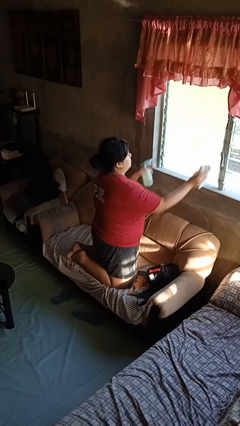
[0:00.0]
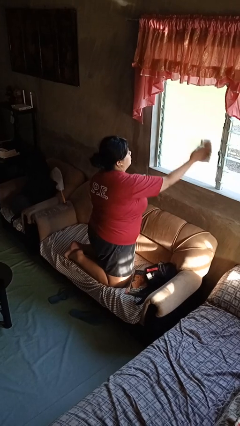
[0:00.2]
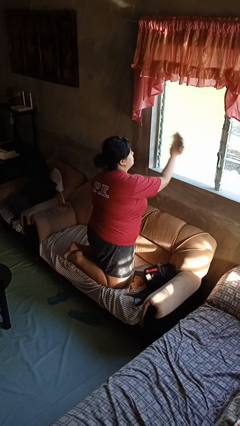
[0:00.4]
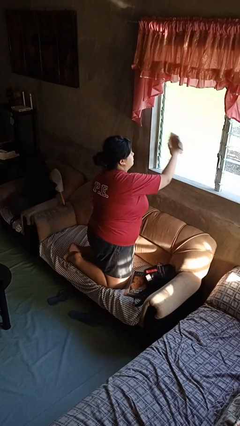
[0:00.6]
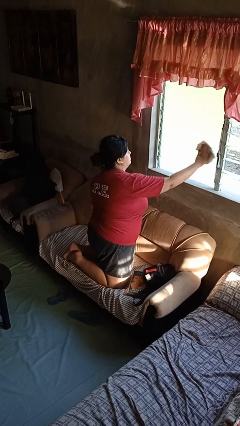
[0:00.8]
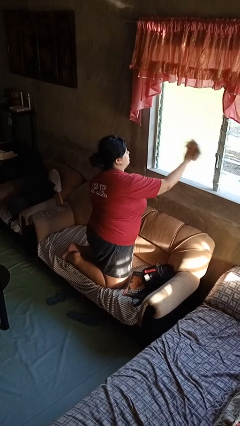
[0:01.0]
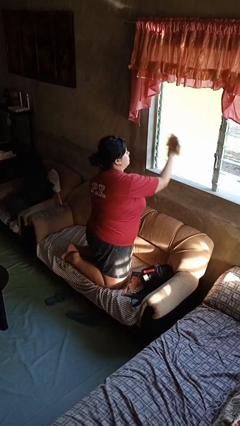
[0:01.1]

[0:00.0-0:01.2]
person washes window

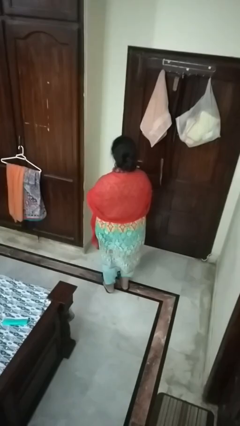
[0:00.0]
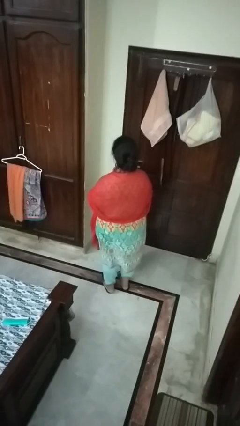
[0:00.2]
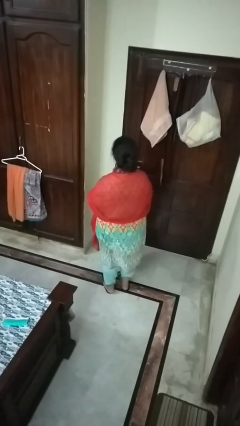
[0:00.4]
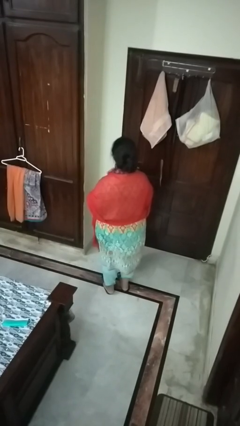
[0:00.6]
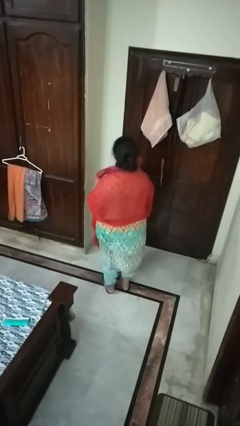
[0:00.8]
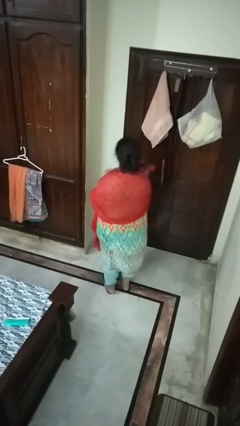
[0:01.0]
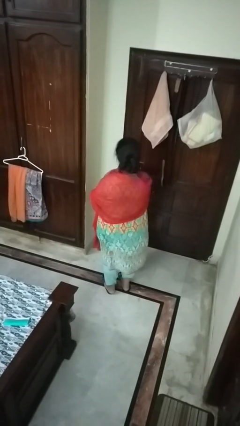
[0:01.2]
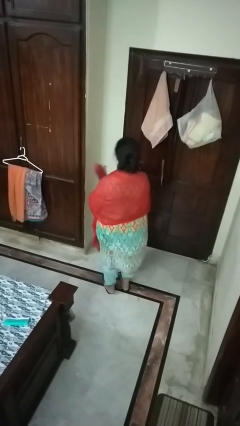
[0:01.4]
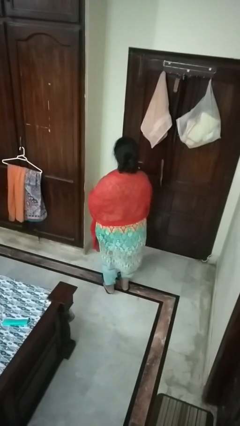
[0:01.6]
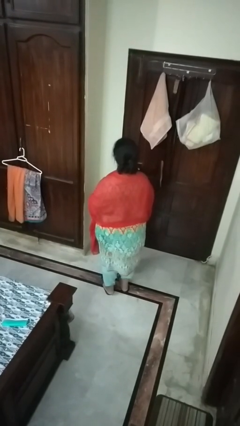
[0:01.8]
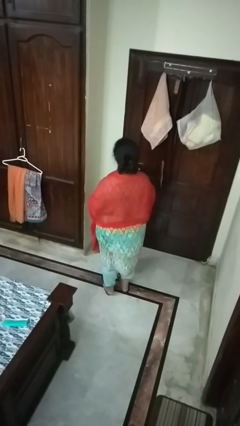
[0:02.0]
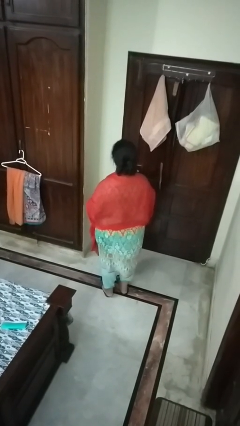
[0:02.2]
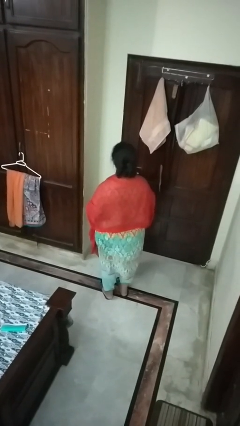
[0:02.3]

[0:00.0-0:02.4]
person takes off scarf

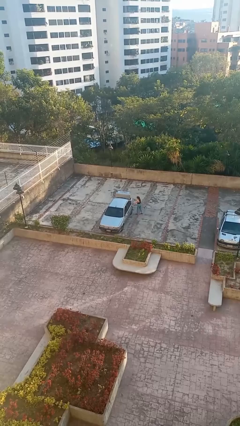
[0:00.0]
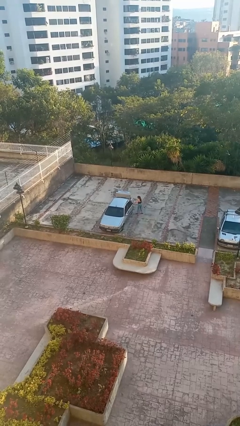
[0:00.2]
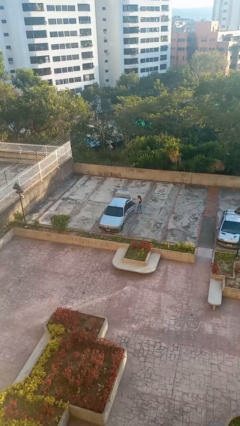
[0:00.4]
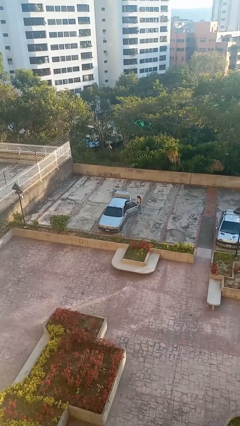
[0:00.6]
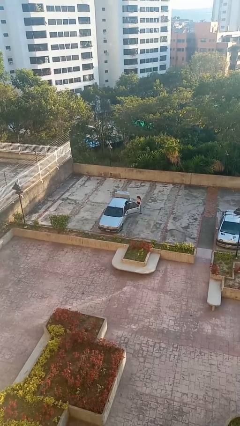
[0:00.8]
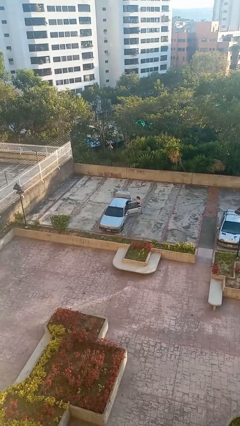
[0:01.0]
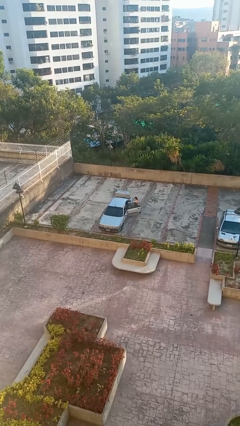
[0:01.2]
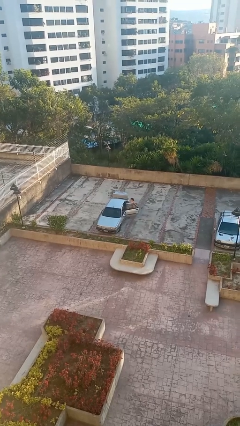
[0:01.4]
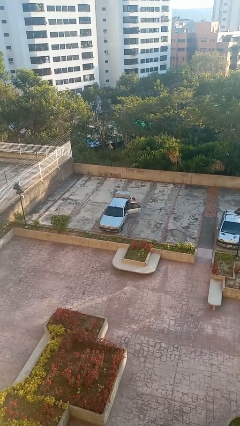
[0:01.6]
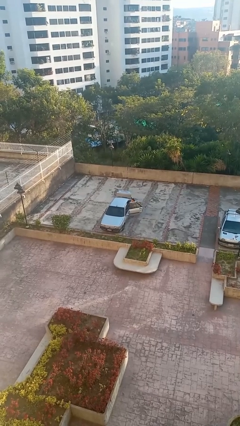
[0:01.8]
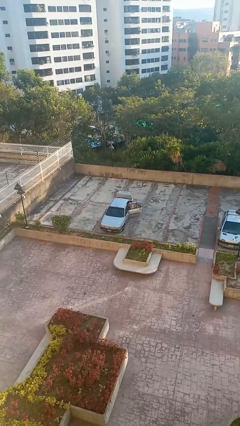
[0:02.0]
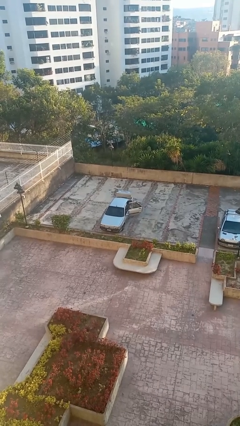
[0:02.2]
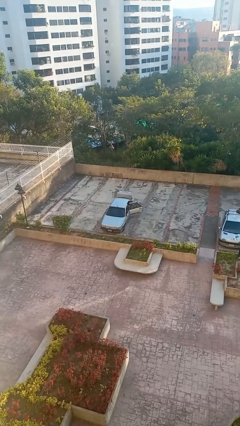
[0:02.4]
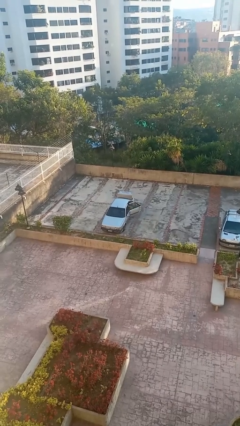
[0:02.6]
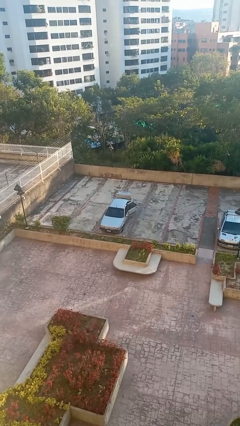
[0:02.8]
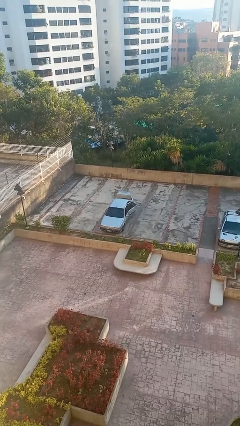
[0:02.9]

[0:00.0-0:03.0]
car picks up person

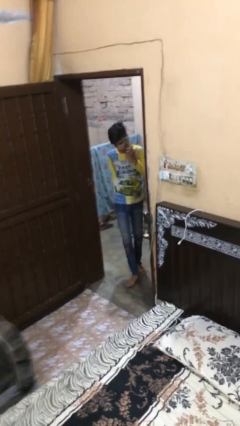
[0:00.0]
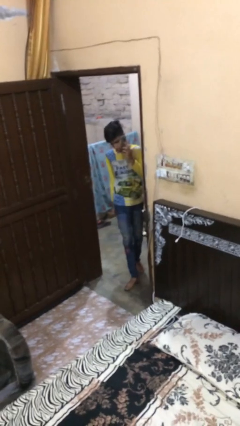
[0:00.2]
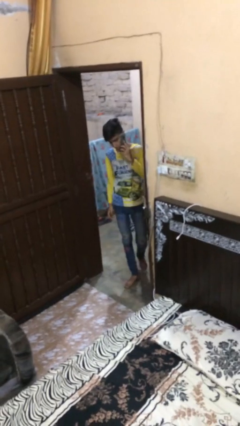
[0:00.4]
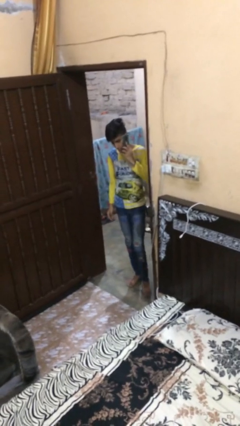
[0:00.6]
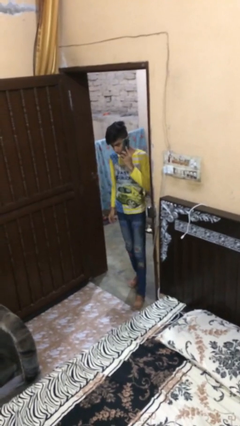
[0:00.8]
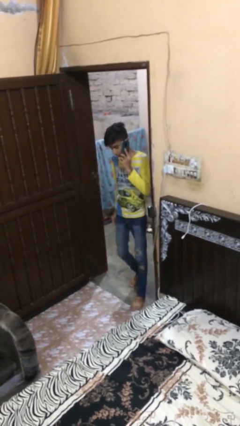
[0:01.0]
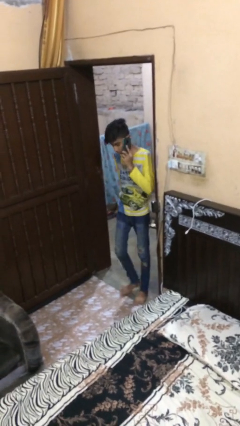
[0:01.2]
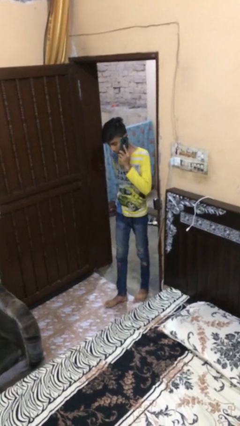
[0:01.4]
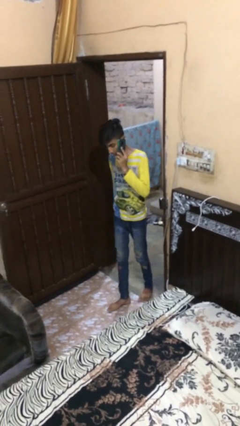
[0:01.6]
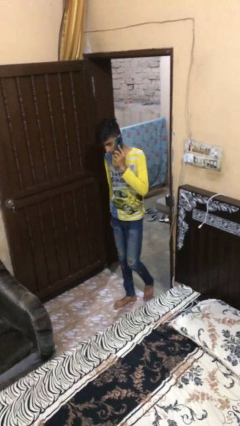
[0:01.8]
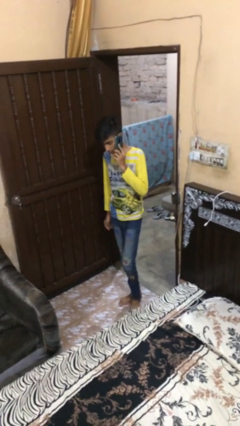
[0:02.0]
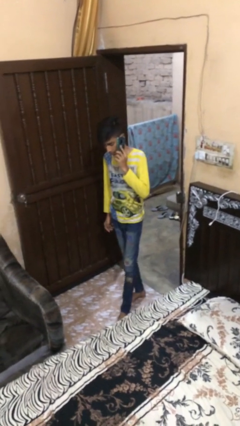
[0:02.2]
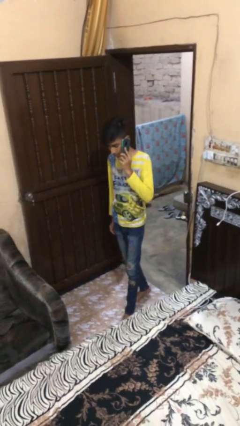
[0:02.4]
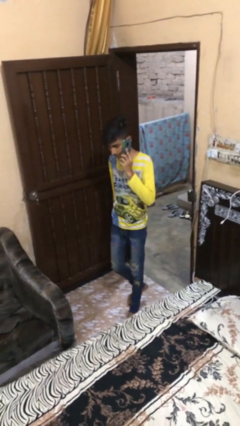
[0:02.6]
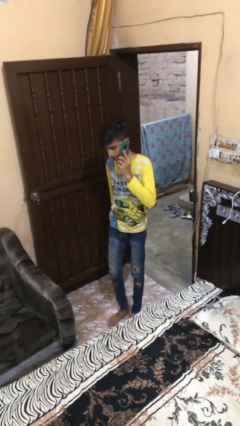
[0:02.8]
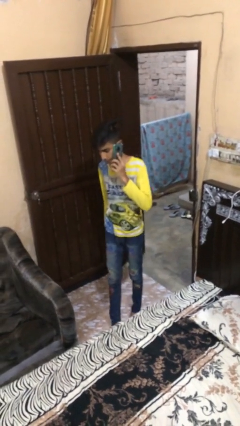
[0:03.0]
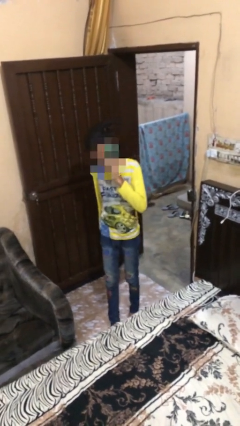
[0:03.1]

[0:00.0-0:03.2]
person enters scene through structure

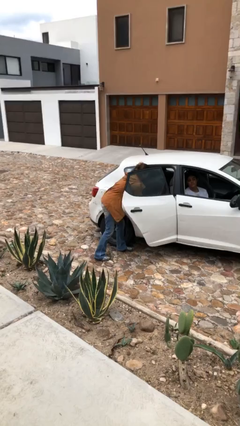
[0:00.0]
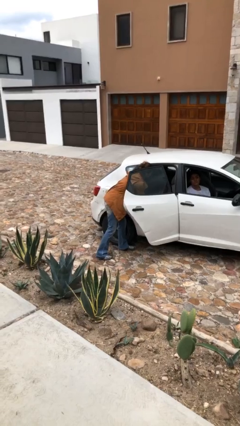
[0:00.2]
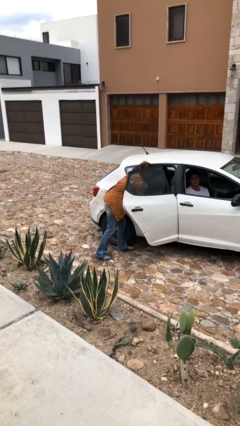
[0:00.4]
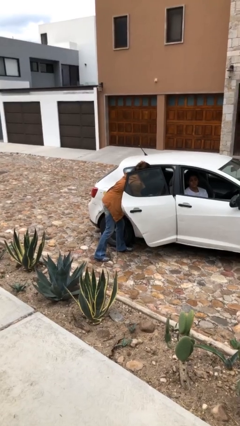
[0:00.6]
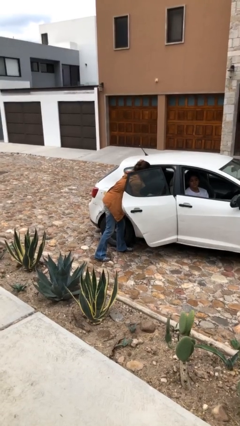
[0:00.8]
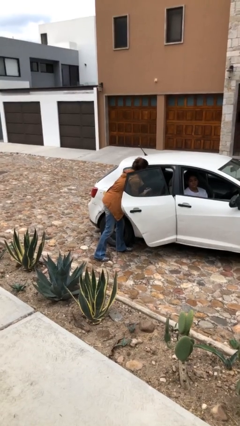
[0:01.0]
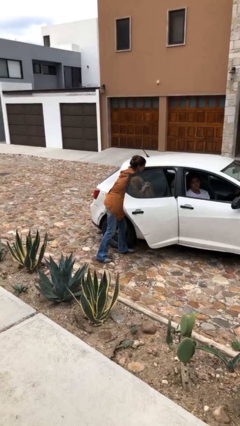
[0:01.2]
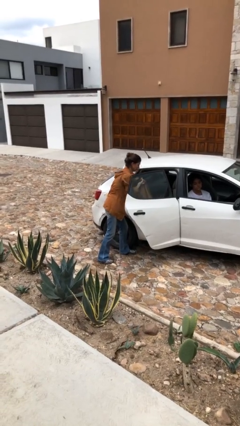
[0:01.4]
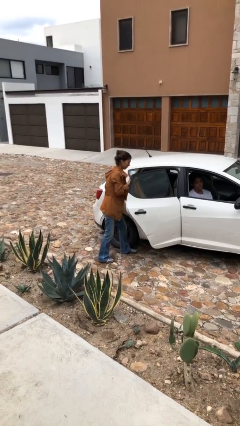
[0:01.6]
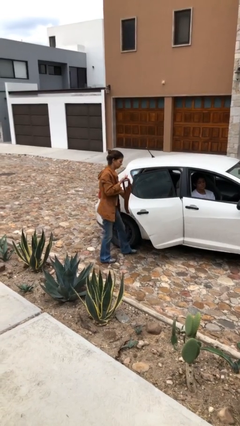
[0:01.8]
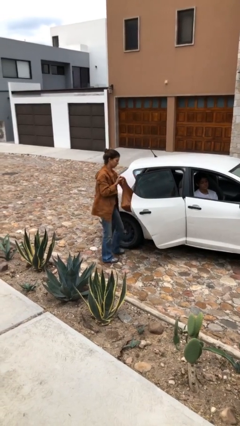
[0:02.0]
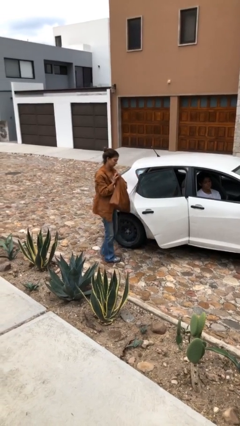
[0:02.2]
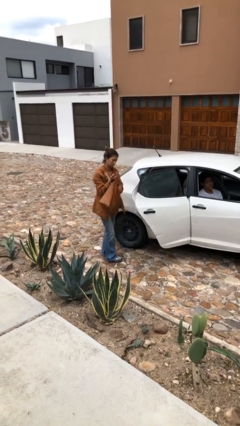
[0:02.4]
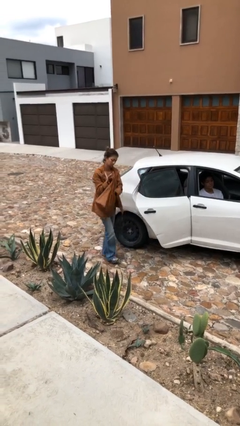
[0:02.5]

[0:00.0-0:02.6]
person unloads car

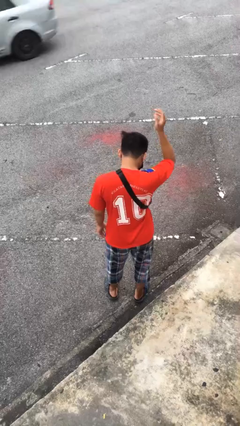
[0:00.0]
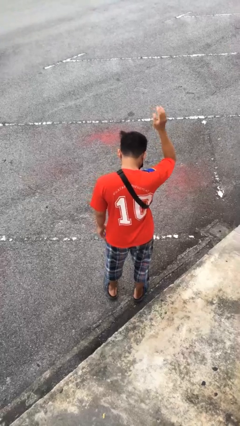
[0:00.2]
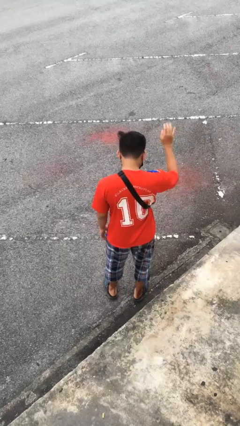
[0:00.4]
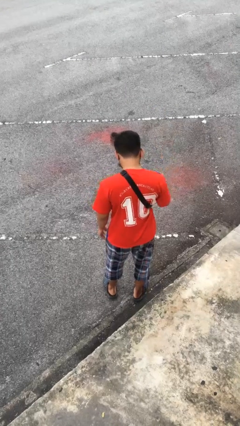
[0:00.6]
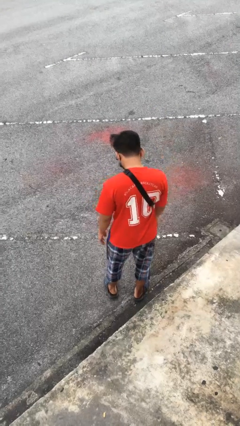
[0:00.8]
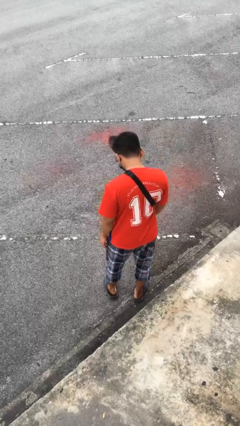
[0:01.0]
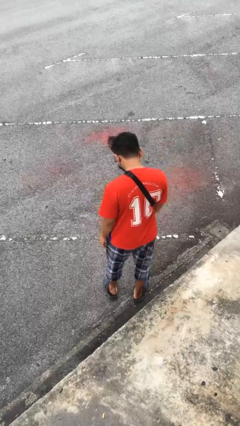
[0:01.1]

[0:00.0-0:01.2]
person gestures swipe down

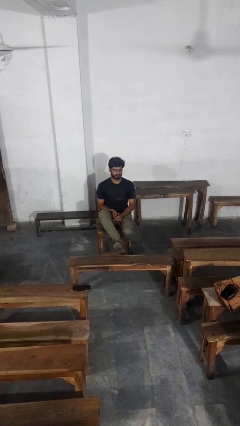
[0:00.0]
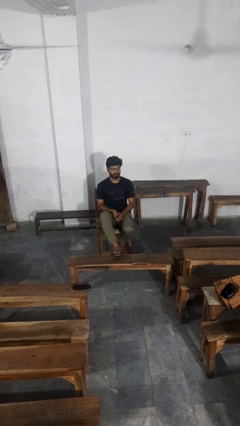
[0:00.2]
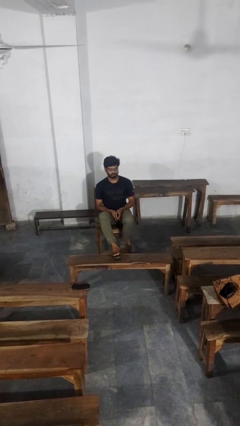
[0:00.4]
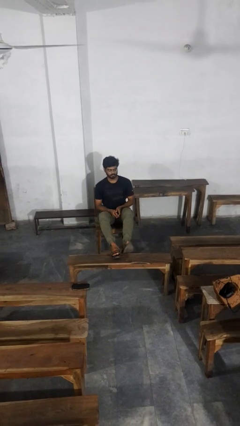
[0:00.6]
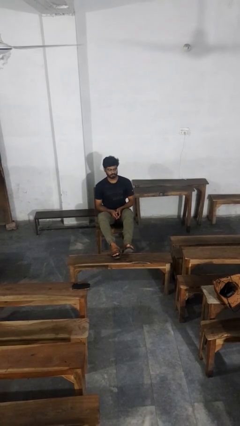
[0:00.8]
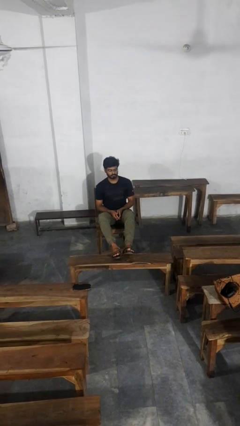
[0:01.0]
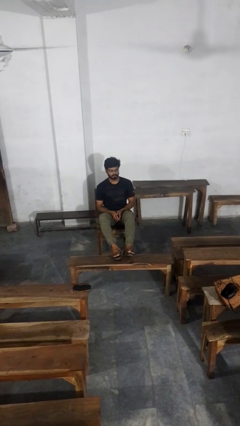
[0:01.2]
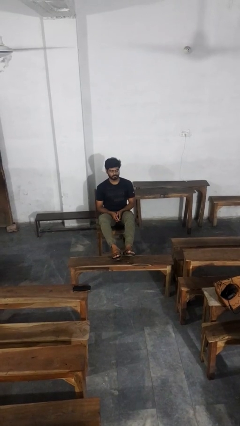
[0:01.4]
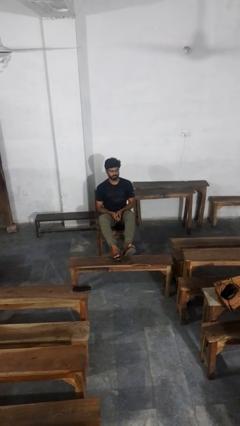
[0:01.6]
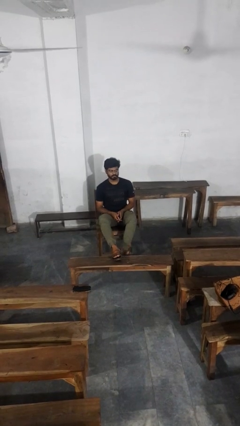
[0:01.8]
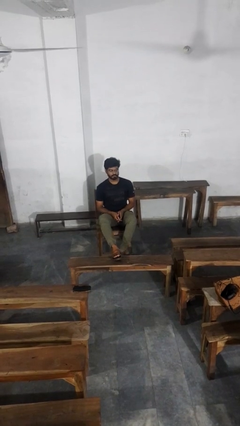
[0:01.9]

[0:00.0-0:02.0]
person puts feet up

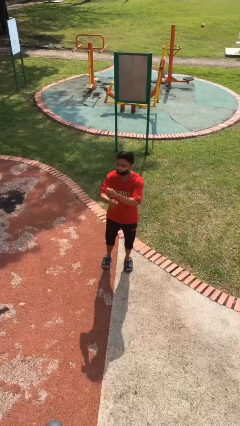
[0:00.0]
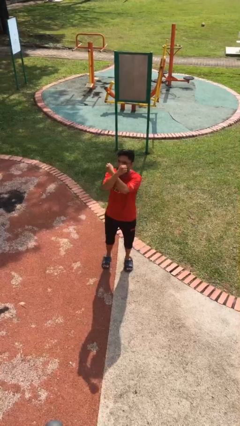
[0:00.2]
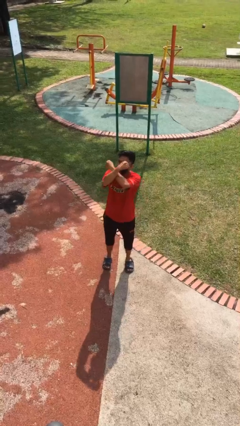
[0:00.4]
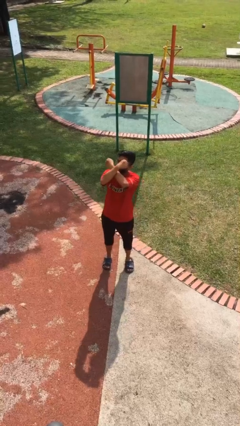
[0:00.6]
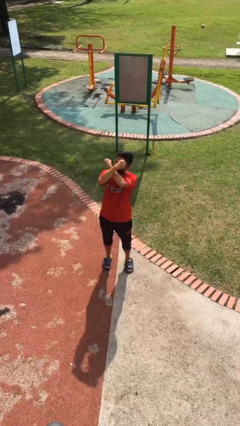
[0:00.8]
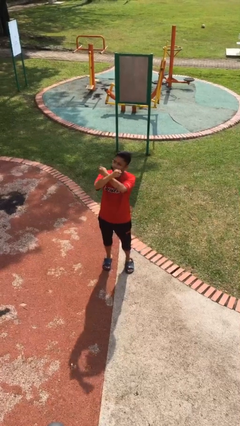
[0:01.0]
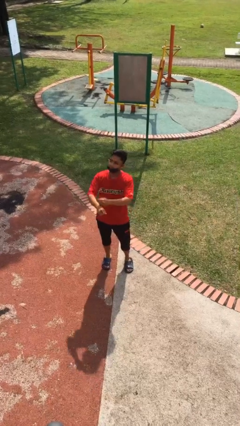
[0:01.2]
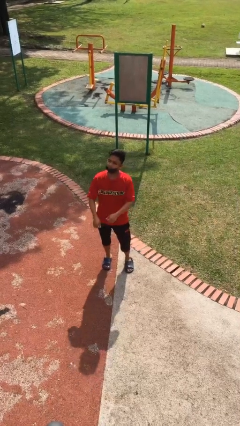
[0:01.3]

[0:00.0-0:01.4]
person gestures arms x
